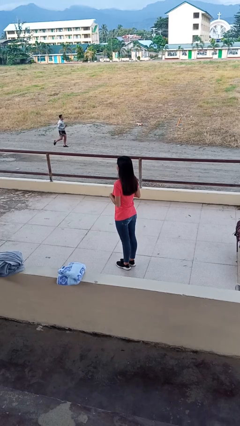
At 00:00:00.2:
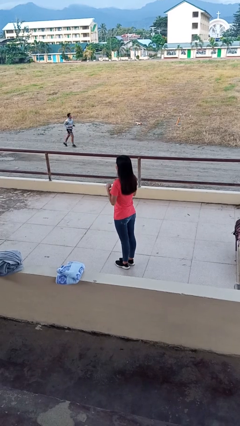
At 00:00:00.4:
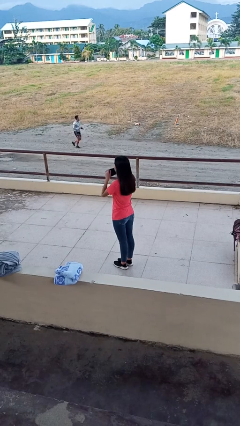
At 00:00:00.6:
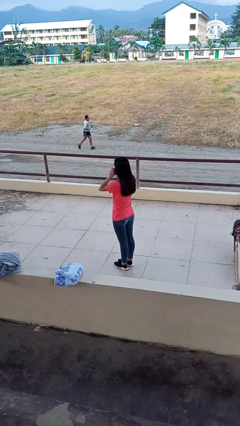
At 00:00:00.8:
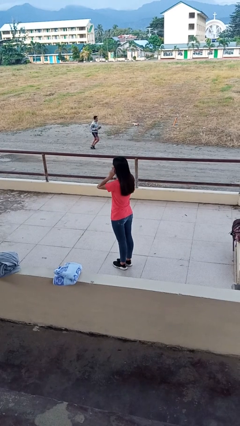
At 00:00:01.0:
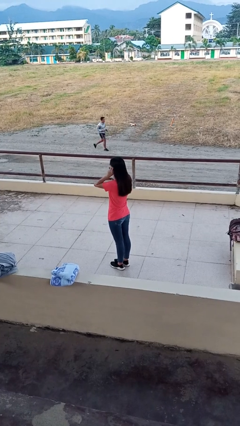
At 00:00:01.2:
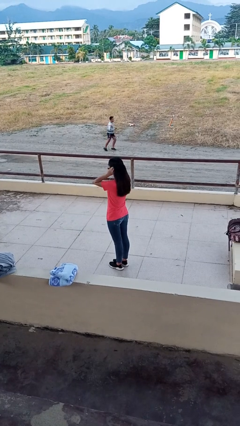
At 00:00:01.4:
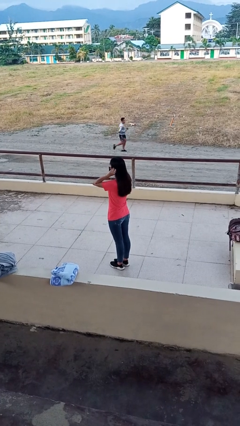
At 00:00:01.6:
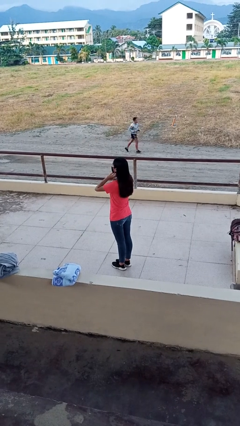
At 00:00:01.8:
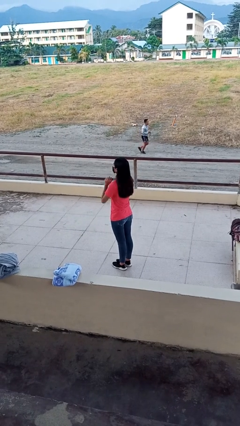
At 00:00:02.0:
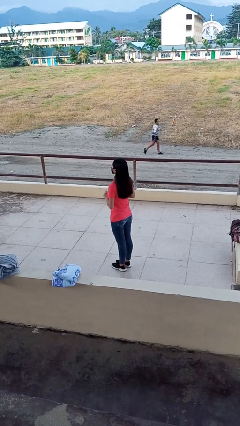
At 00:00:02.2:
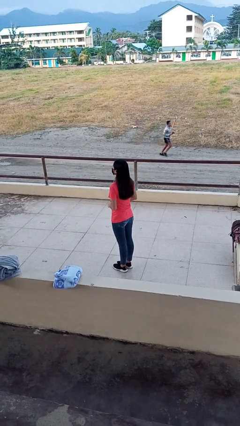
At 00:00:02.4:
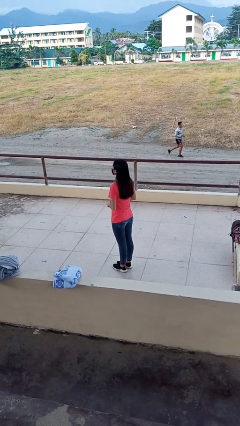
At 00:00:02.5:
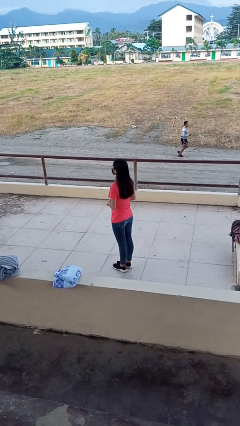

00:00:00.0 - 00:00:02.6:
person puts on facemask

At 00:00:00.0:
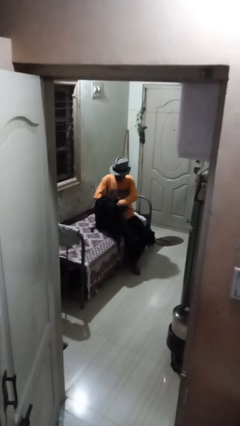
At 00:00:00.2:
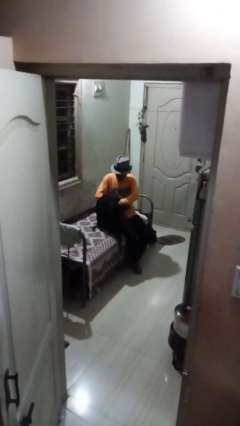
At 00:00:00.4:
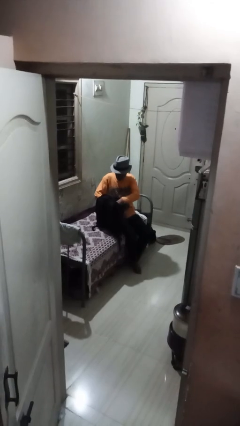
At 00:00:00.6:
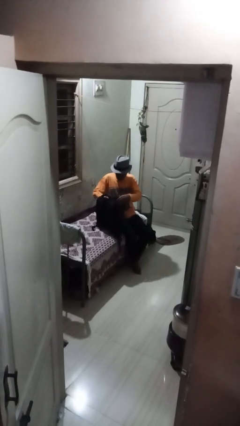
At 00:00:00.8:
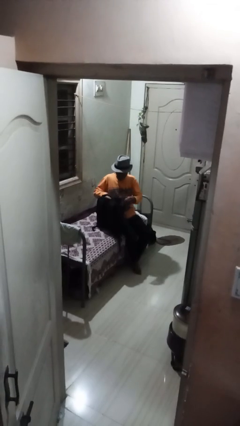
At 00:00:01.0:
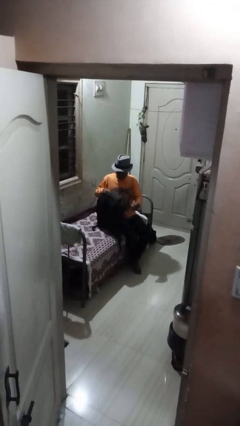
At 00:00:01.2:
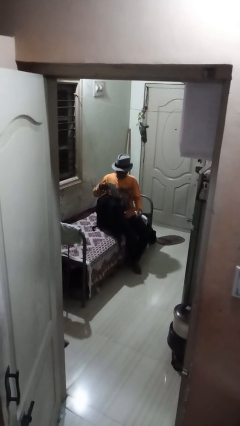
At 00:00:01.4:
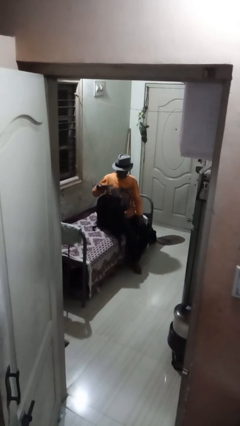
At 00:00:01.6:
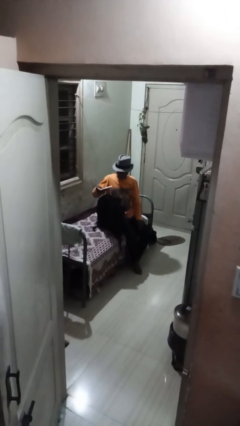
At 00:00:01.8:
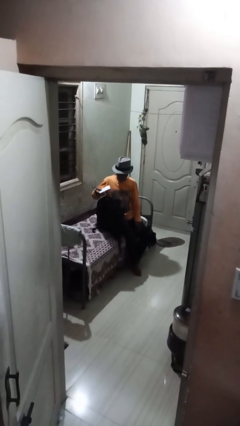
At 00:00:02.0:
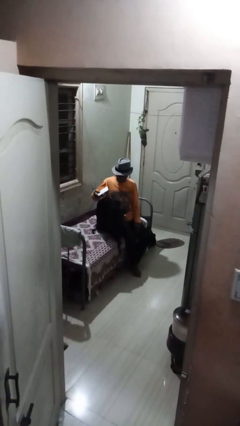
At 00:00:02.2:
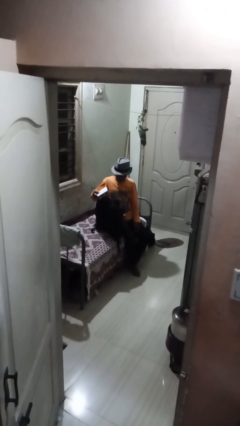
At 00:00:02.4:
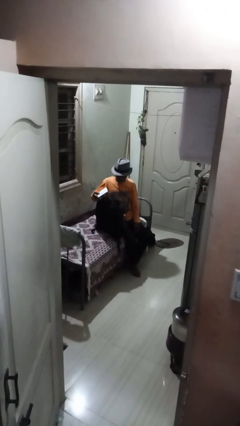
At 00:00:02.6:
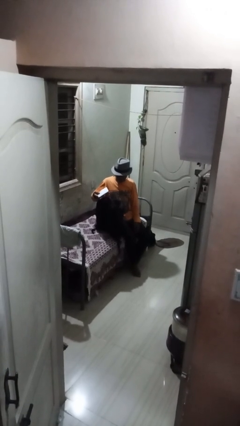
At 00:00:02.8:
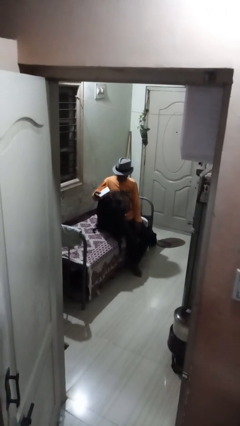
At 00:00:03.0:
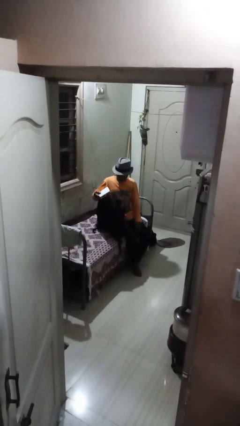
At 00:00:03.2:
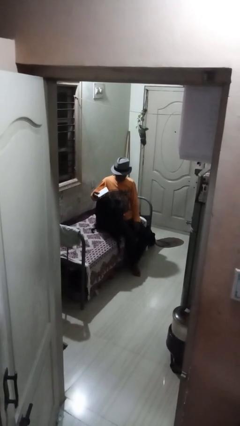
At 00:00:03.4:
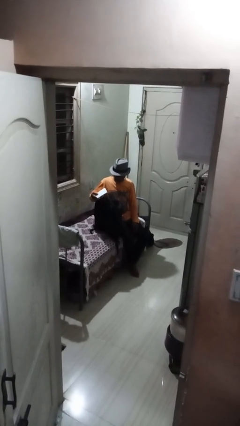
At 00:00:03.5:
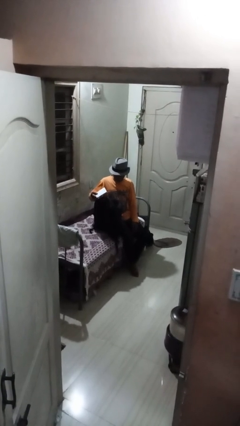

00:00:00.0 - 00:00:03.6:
person takes object from backpack

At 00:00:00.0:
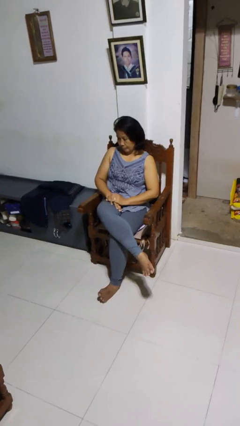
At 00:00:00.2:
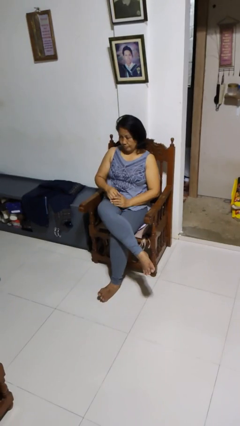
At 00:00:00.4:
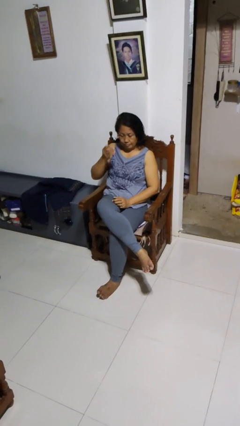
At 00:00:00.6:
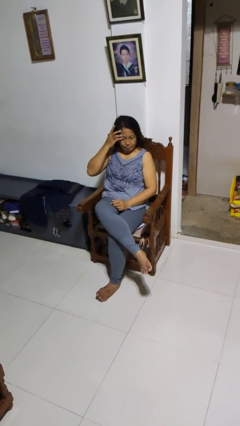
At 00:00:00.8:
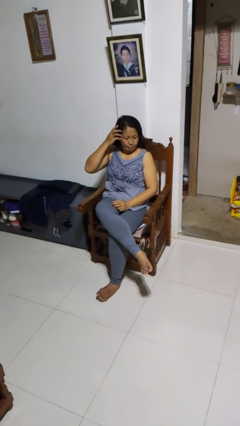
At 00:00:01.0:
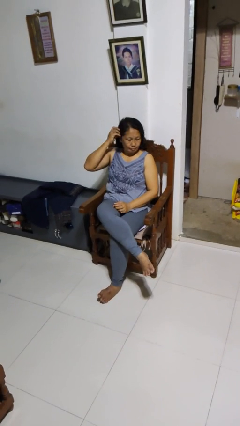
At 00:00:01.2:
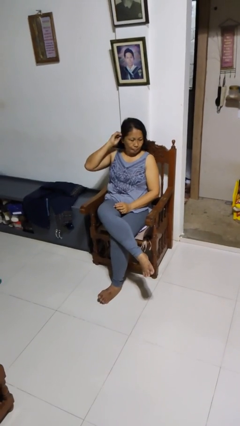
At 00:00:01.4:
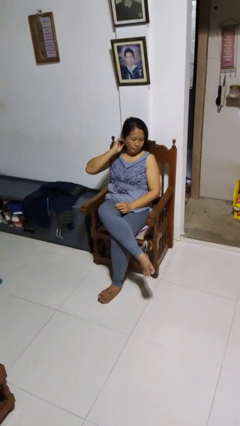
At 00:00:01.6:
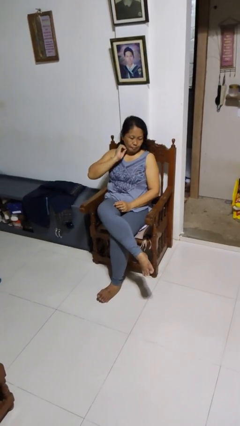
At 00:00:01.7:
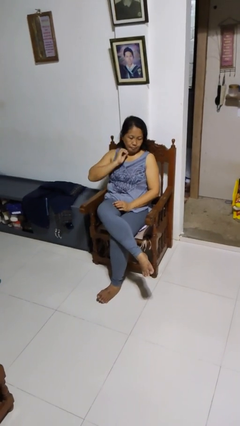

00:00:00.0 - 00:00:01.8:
person strokes hair

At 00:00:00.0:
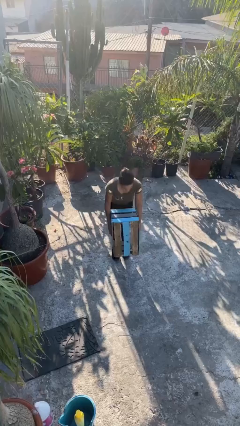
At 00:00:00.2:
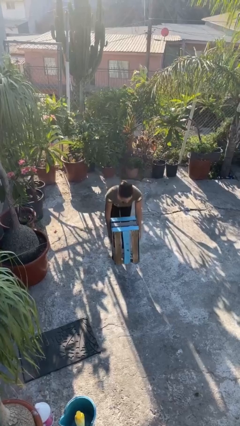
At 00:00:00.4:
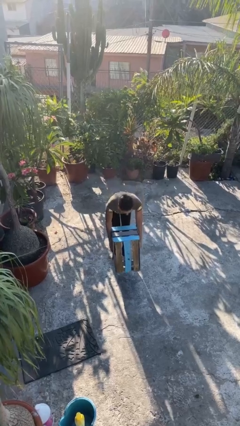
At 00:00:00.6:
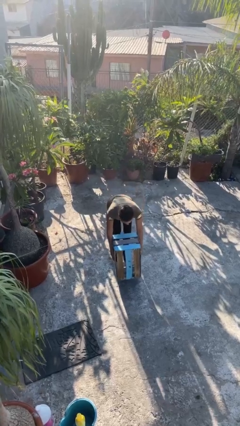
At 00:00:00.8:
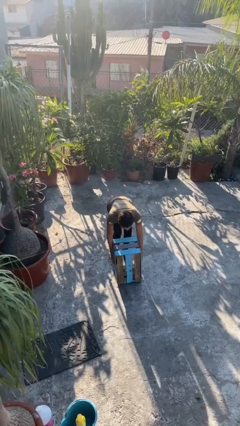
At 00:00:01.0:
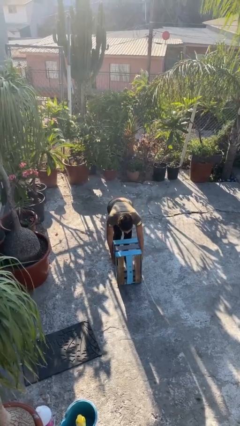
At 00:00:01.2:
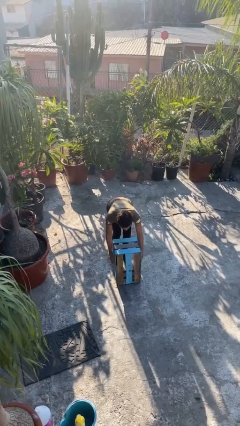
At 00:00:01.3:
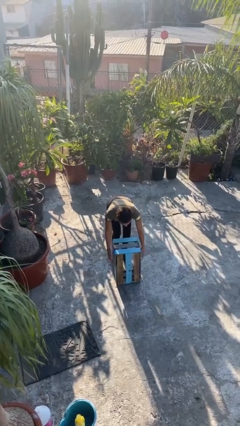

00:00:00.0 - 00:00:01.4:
person puts down object on floor

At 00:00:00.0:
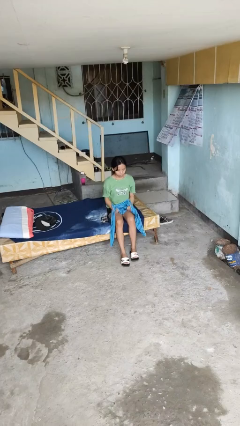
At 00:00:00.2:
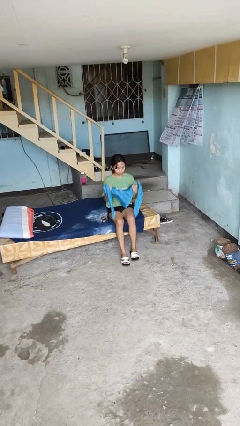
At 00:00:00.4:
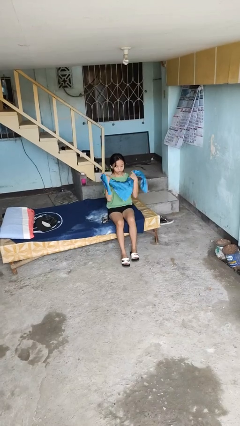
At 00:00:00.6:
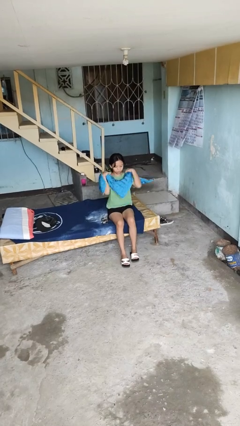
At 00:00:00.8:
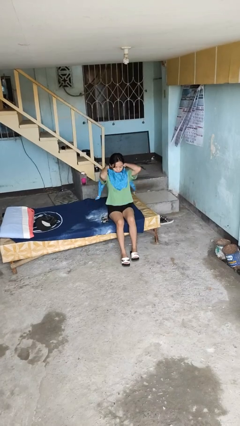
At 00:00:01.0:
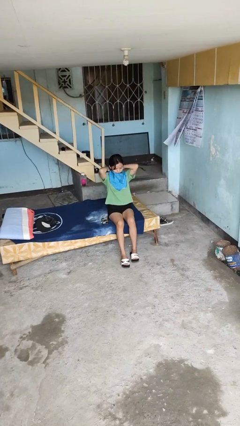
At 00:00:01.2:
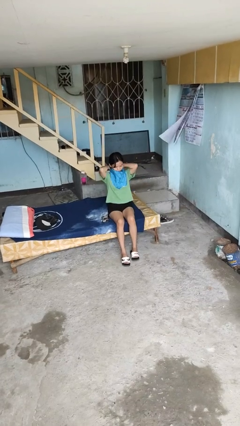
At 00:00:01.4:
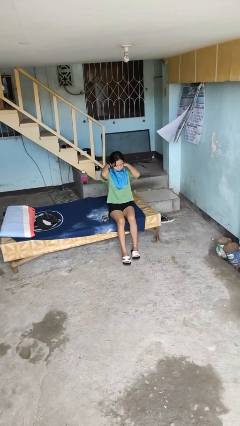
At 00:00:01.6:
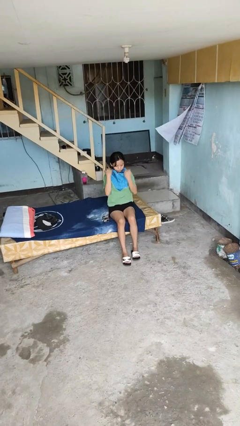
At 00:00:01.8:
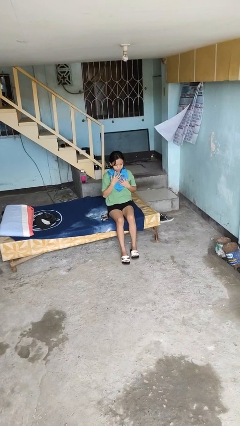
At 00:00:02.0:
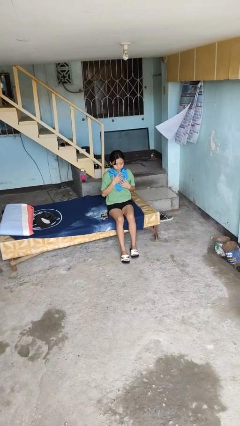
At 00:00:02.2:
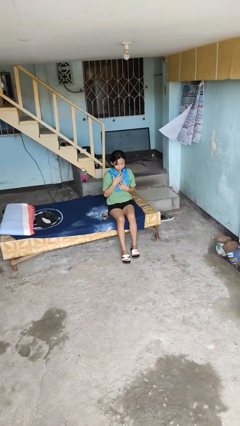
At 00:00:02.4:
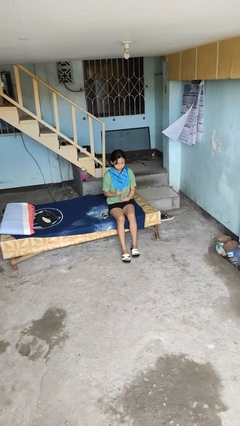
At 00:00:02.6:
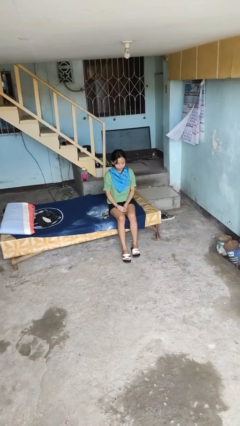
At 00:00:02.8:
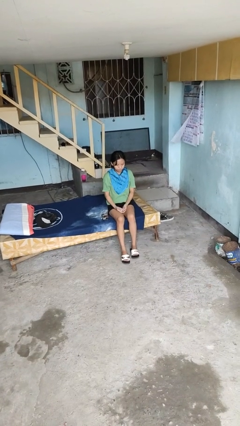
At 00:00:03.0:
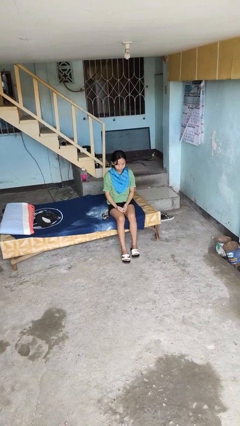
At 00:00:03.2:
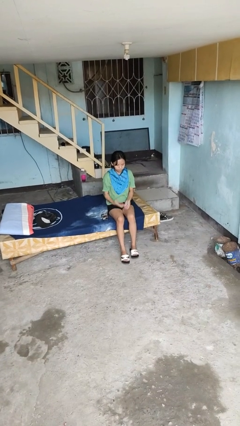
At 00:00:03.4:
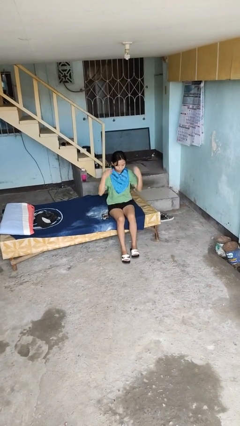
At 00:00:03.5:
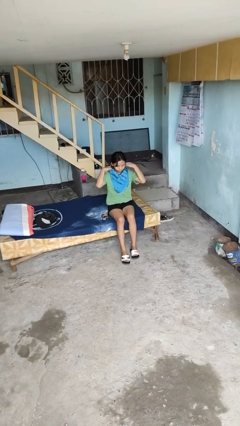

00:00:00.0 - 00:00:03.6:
person puts on scarf

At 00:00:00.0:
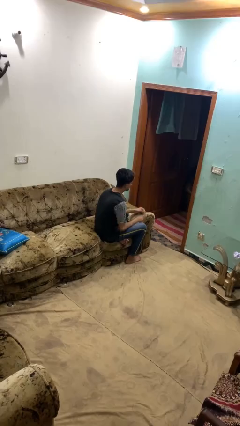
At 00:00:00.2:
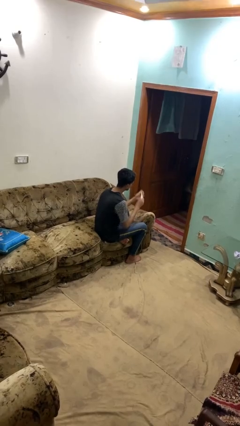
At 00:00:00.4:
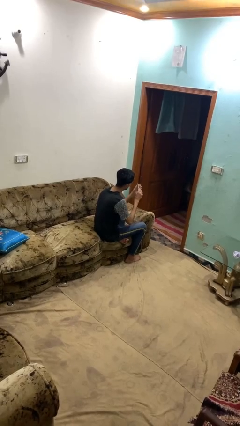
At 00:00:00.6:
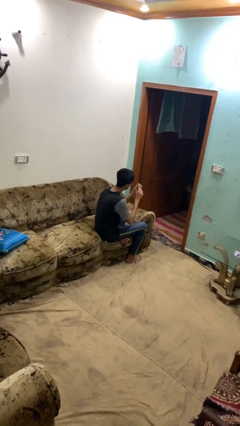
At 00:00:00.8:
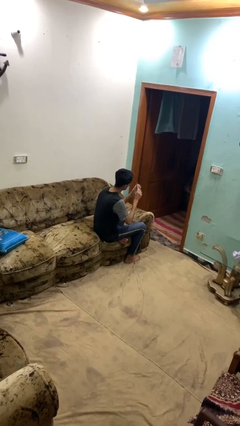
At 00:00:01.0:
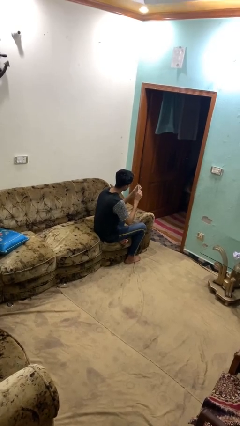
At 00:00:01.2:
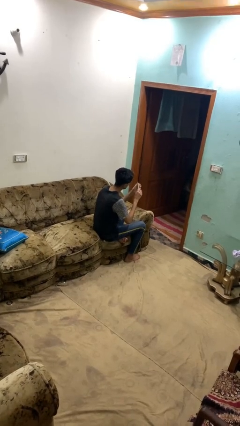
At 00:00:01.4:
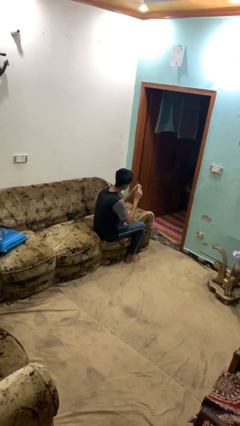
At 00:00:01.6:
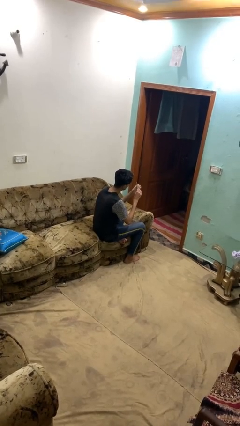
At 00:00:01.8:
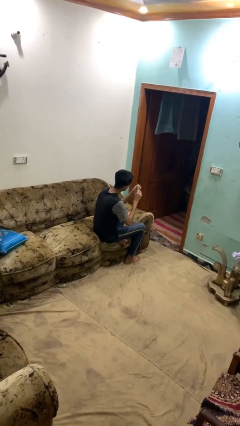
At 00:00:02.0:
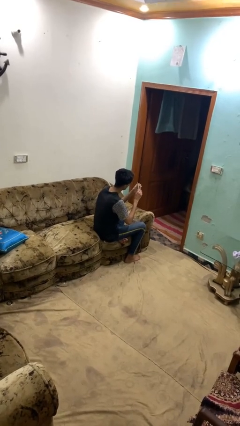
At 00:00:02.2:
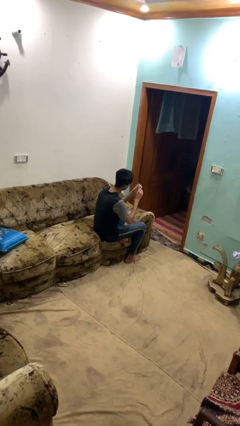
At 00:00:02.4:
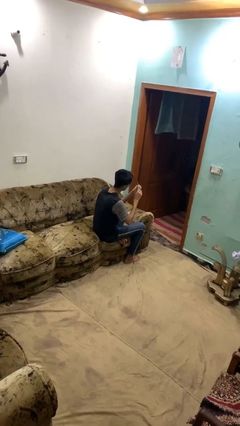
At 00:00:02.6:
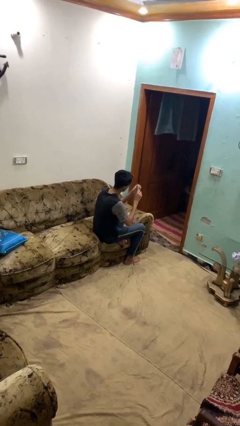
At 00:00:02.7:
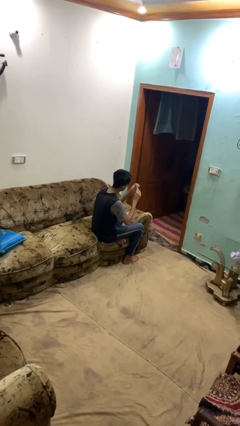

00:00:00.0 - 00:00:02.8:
person files fingernails

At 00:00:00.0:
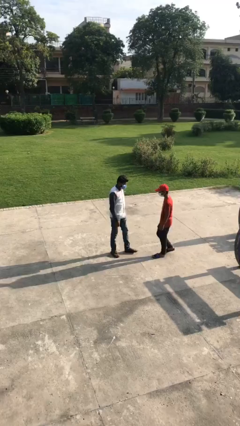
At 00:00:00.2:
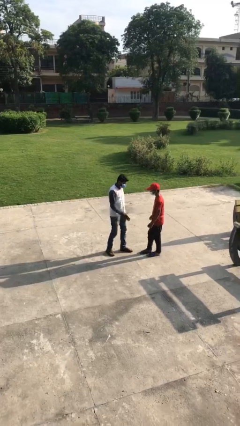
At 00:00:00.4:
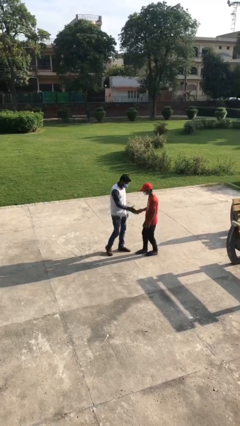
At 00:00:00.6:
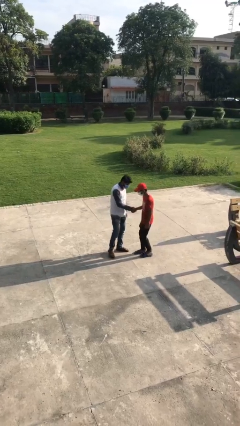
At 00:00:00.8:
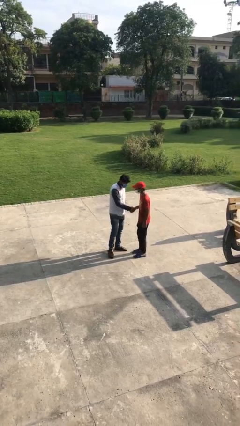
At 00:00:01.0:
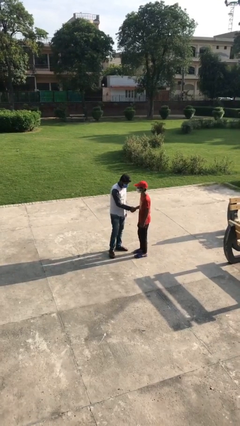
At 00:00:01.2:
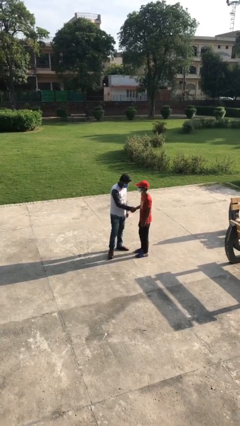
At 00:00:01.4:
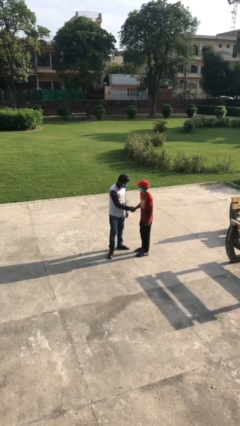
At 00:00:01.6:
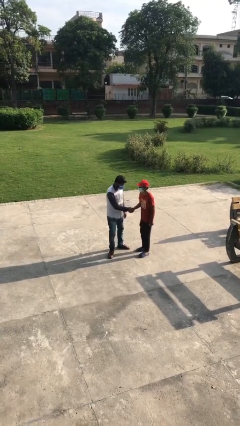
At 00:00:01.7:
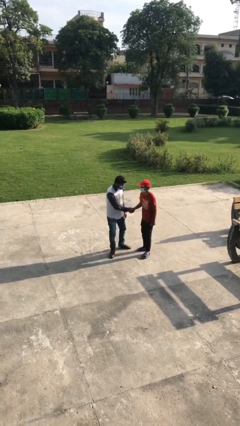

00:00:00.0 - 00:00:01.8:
person shakes hand
